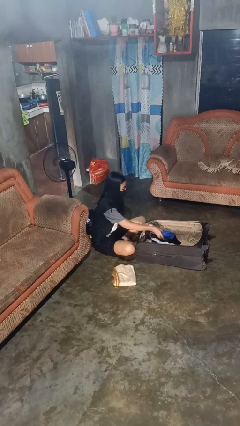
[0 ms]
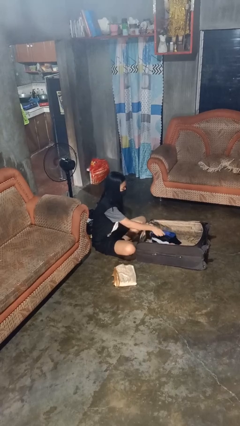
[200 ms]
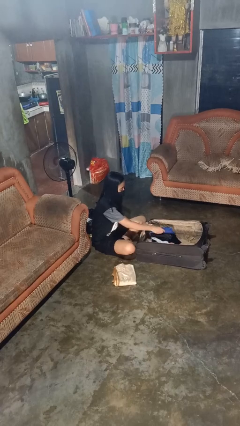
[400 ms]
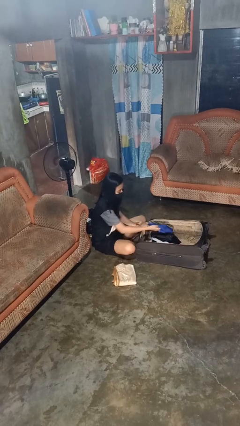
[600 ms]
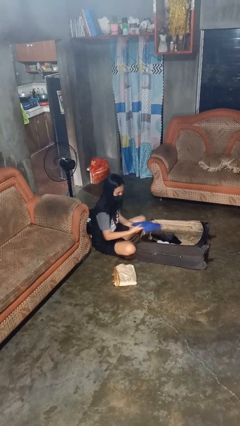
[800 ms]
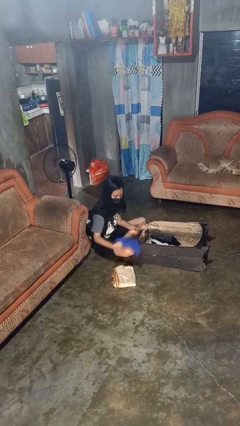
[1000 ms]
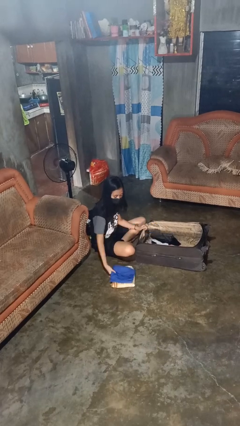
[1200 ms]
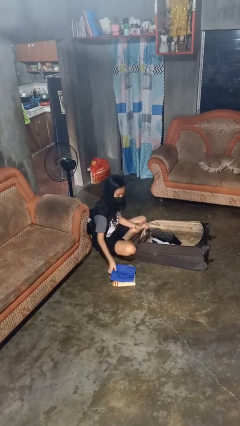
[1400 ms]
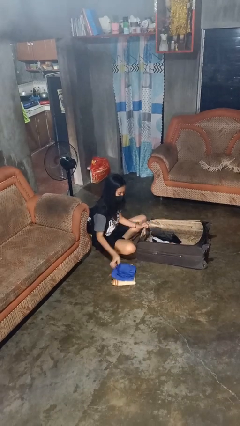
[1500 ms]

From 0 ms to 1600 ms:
person unloads clothes from suitcase

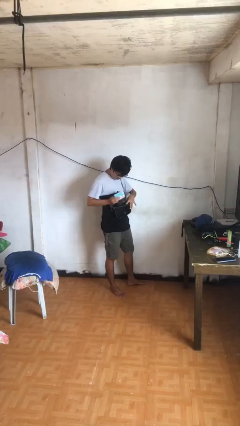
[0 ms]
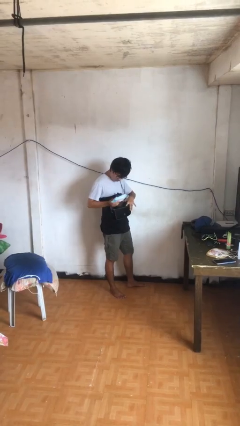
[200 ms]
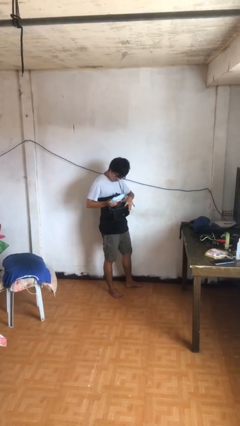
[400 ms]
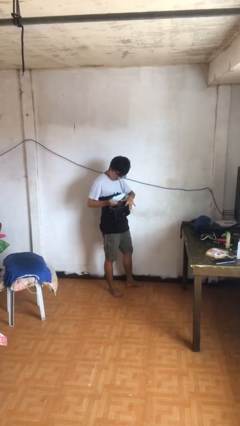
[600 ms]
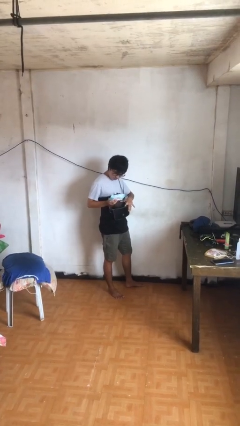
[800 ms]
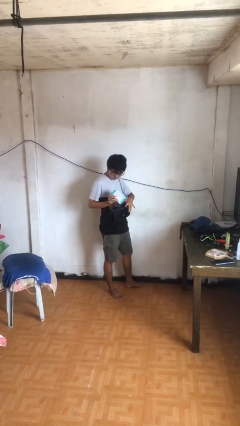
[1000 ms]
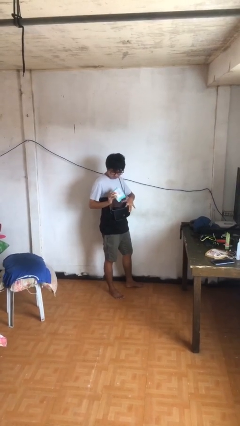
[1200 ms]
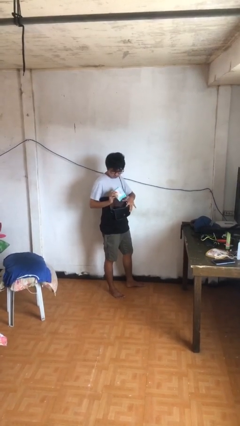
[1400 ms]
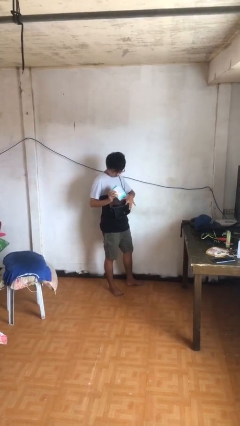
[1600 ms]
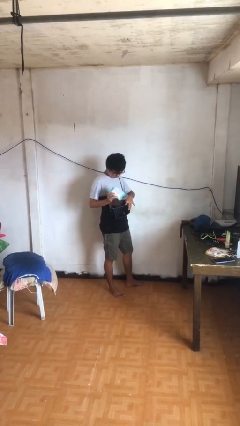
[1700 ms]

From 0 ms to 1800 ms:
person takes object from purse

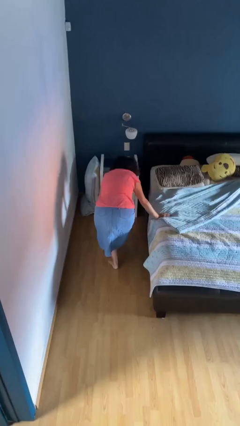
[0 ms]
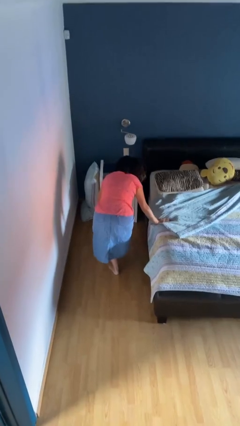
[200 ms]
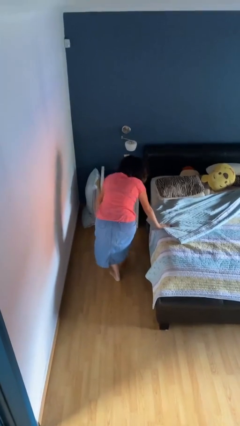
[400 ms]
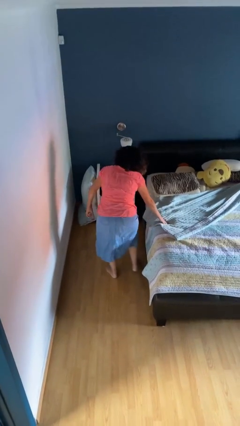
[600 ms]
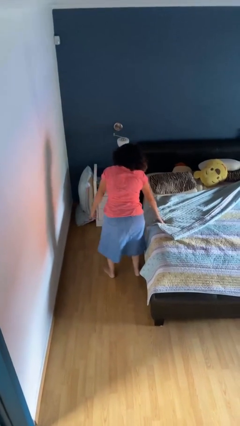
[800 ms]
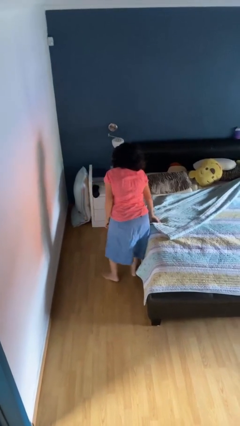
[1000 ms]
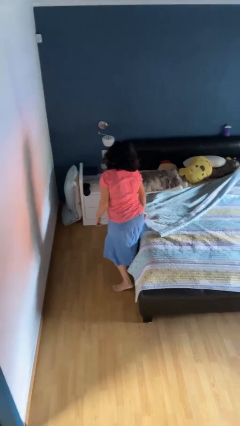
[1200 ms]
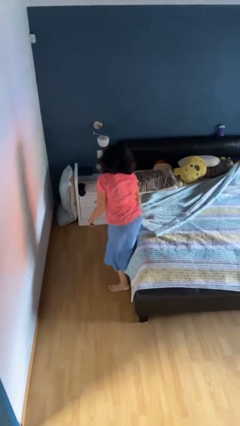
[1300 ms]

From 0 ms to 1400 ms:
person stands up from floor

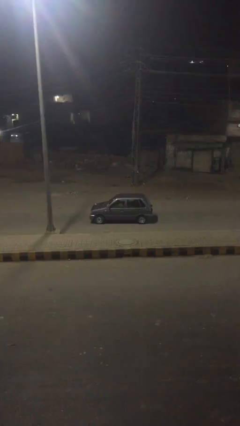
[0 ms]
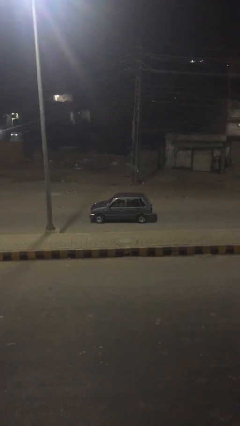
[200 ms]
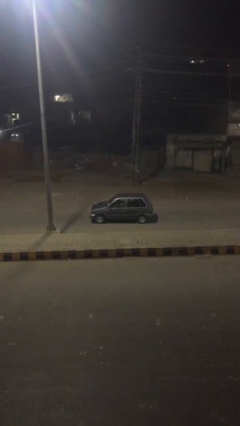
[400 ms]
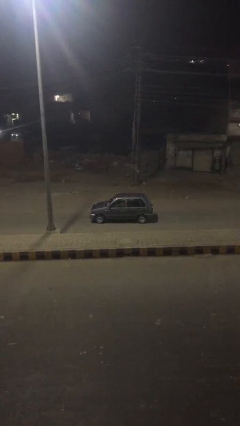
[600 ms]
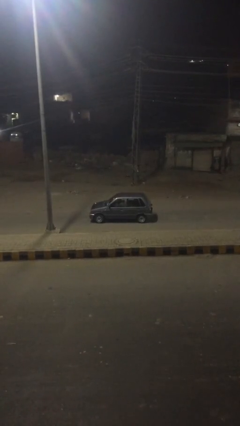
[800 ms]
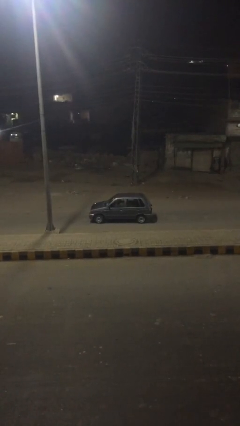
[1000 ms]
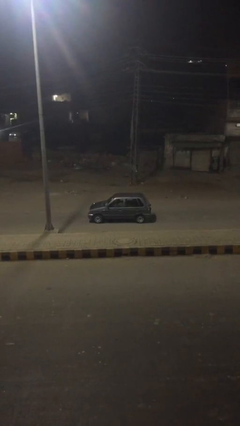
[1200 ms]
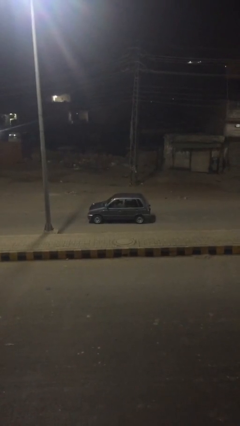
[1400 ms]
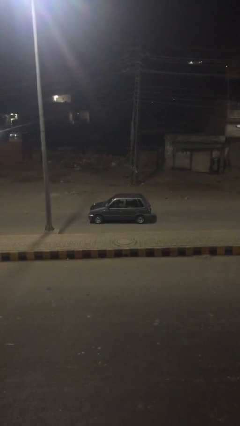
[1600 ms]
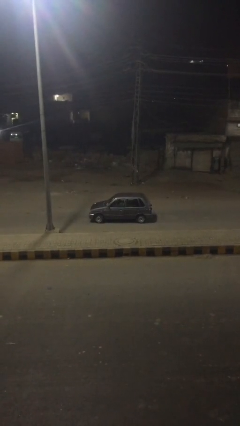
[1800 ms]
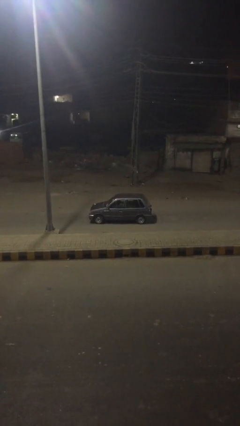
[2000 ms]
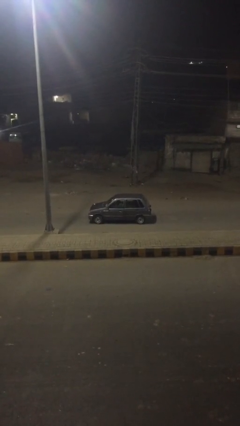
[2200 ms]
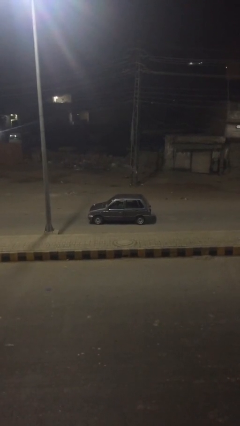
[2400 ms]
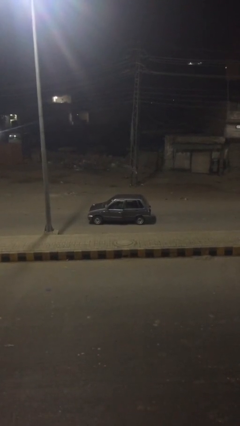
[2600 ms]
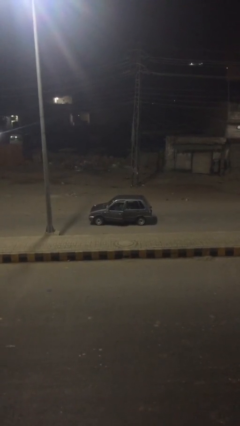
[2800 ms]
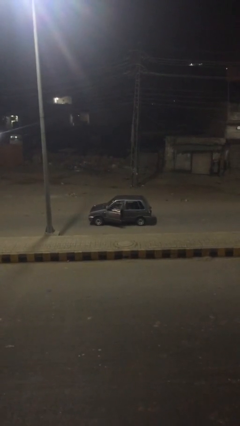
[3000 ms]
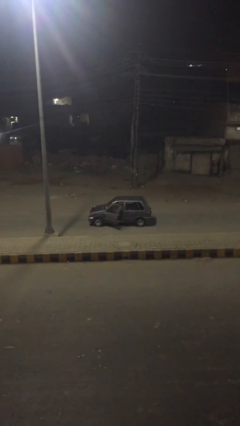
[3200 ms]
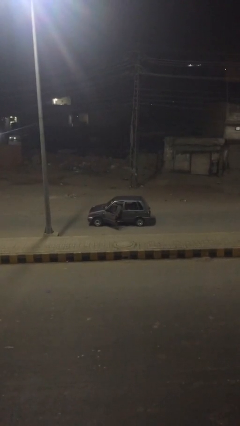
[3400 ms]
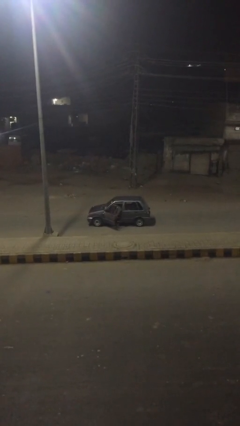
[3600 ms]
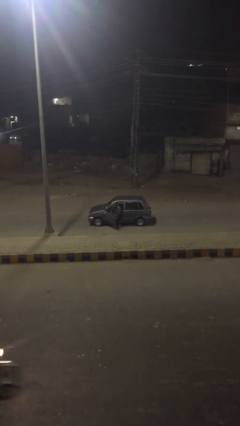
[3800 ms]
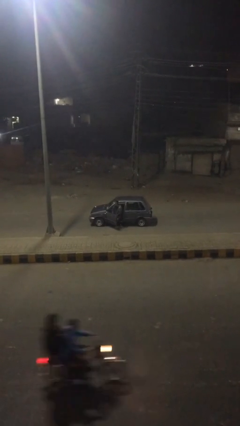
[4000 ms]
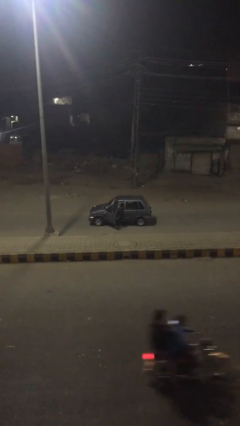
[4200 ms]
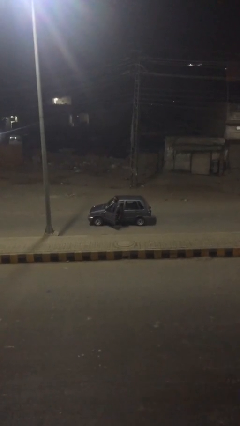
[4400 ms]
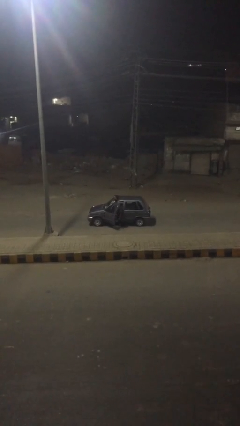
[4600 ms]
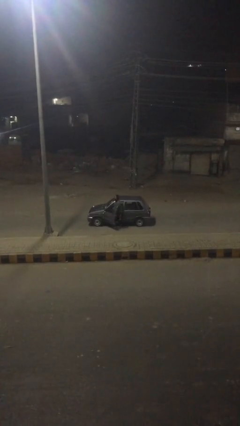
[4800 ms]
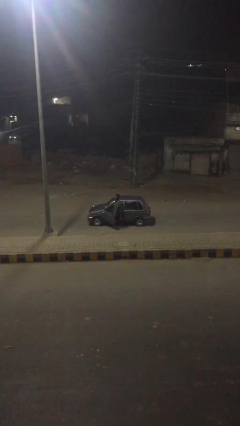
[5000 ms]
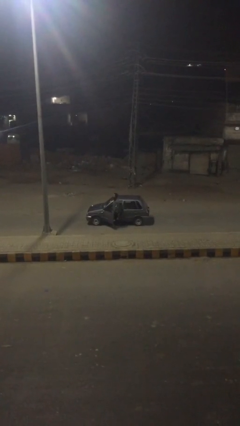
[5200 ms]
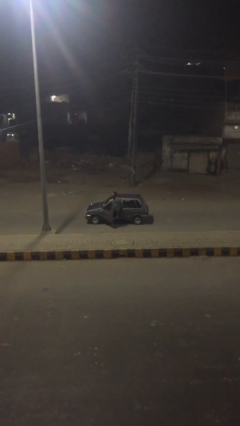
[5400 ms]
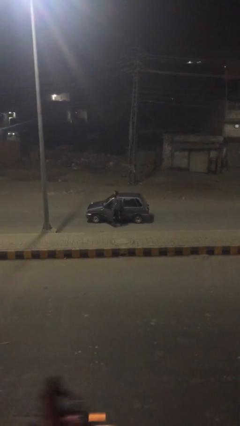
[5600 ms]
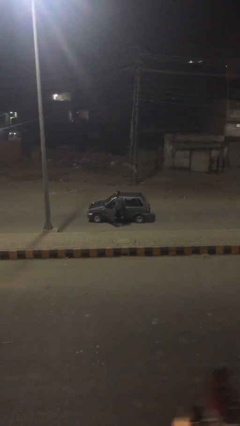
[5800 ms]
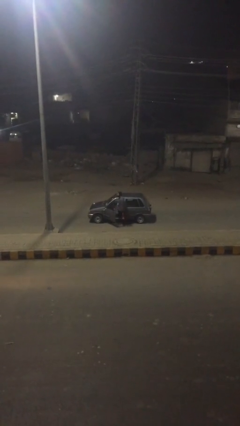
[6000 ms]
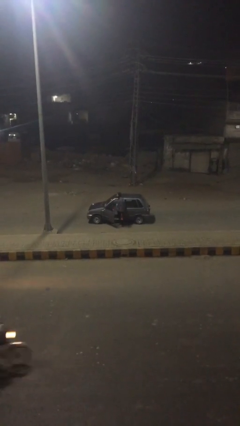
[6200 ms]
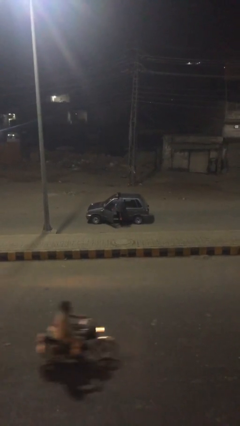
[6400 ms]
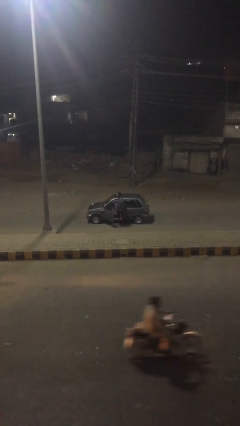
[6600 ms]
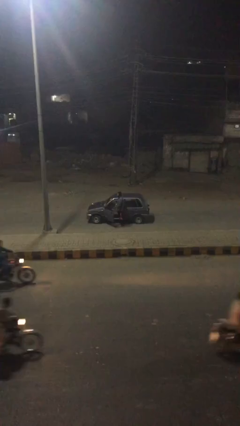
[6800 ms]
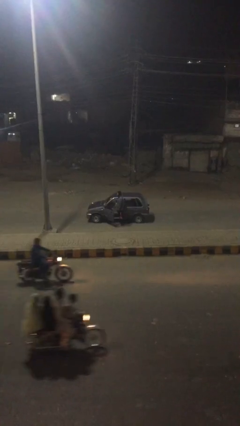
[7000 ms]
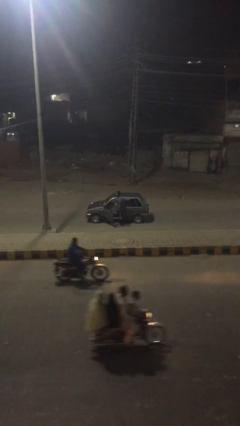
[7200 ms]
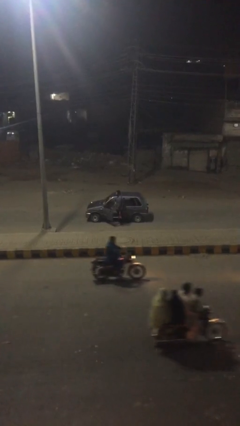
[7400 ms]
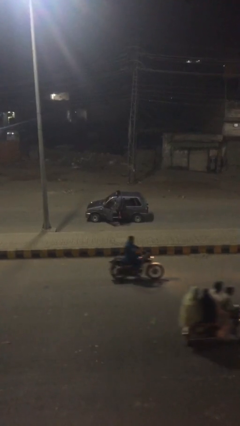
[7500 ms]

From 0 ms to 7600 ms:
person exits car

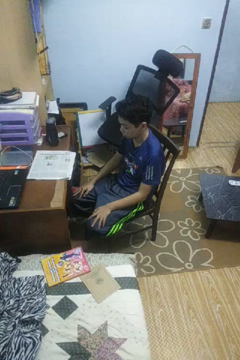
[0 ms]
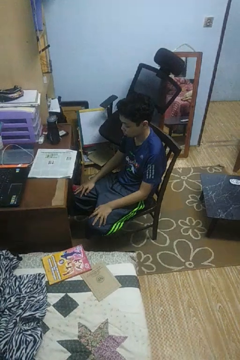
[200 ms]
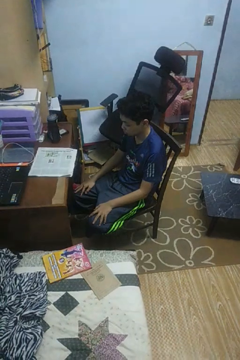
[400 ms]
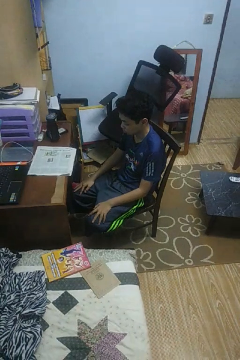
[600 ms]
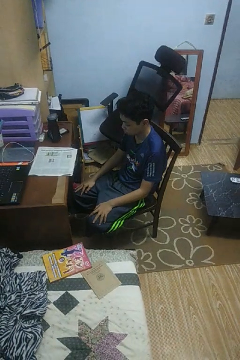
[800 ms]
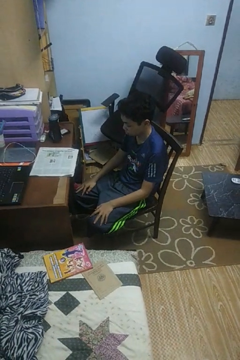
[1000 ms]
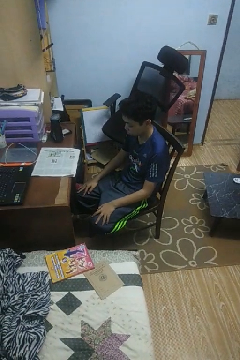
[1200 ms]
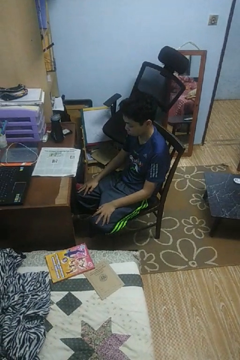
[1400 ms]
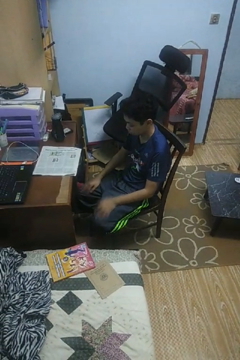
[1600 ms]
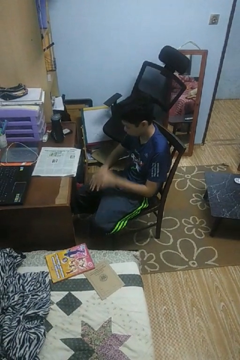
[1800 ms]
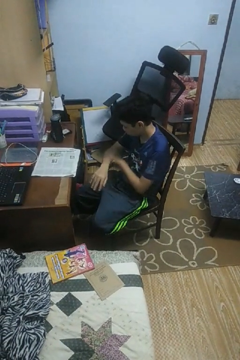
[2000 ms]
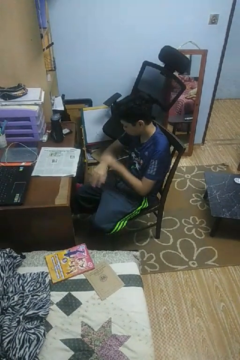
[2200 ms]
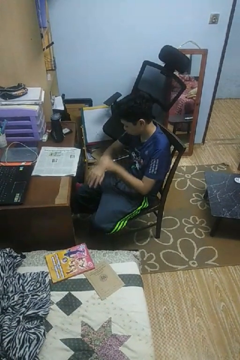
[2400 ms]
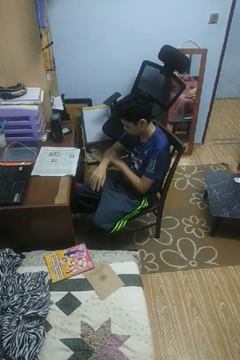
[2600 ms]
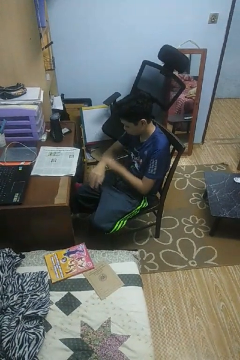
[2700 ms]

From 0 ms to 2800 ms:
person looks at hands in lap

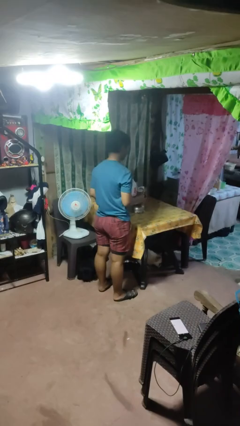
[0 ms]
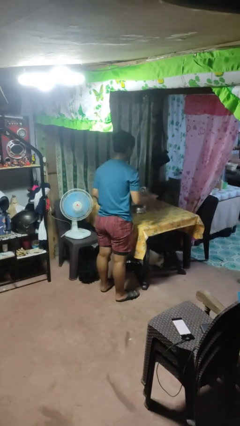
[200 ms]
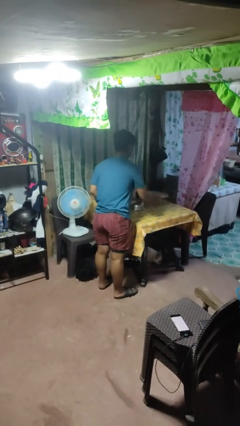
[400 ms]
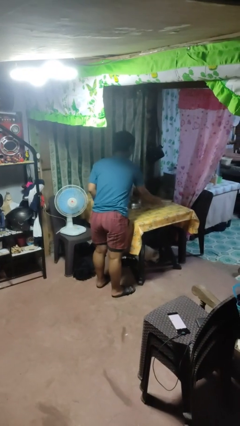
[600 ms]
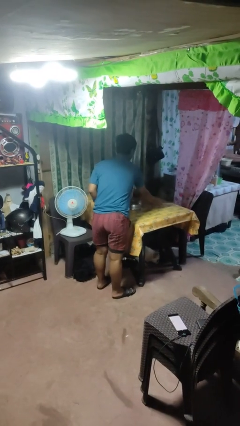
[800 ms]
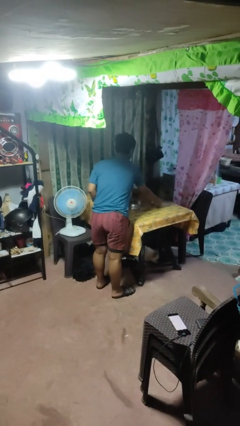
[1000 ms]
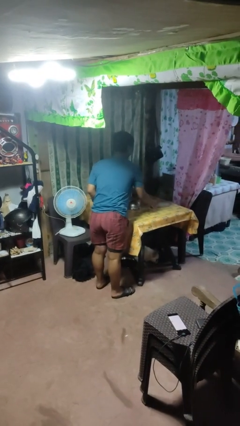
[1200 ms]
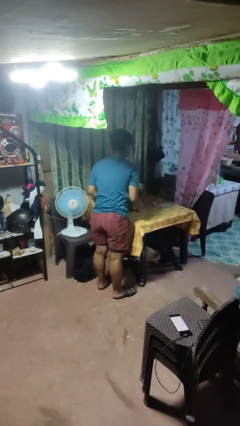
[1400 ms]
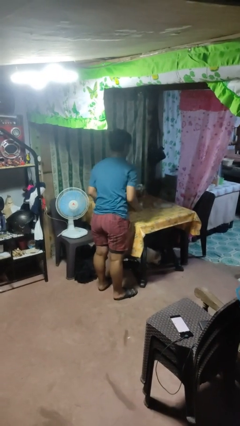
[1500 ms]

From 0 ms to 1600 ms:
person sets table

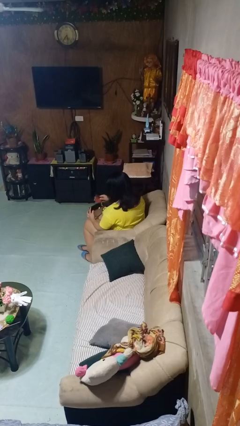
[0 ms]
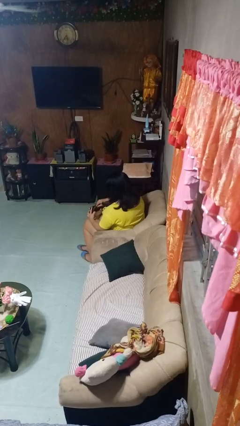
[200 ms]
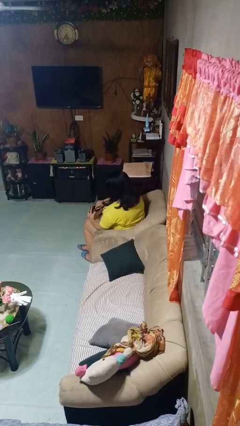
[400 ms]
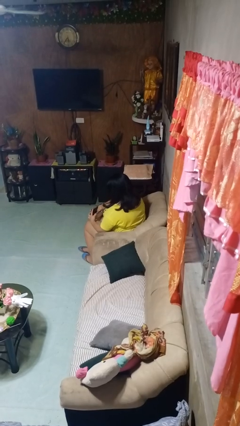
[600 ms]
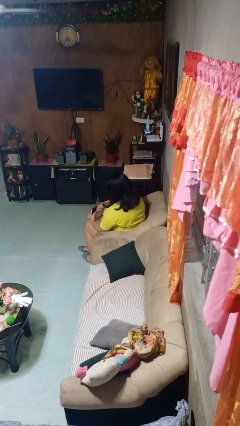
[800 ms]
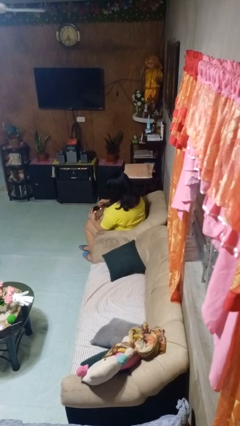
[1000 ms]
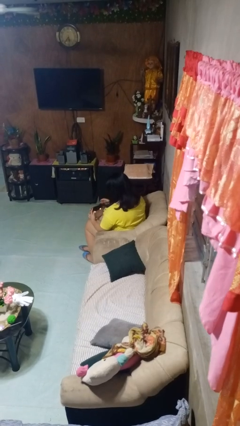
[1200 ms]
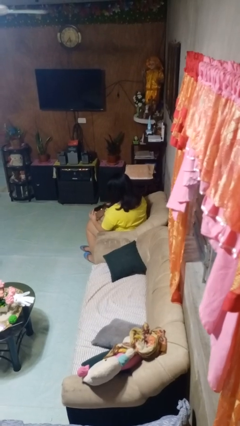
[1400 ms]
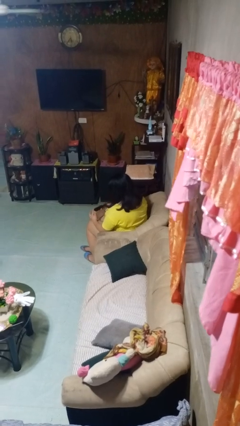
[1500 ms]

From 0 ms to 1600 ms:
person puts object into purse
